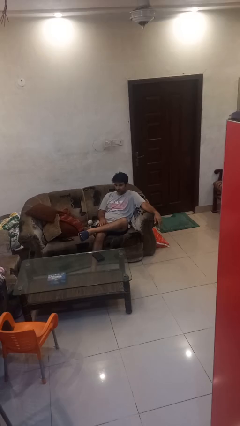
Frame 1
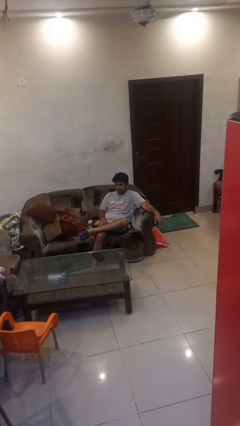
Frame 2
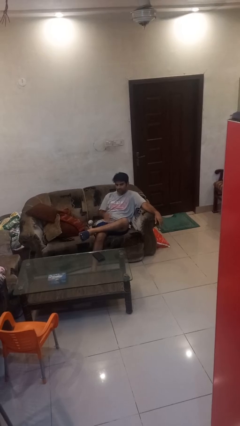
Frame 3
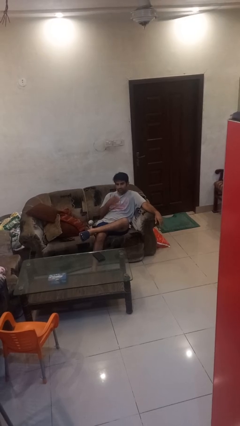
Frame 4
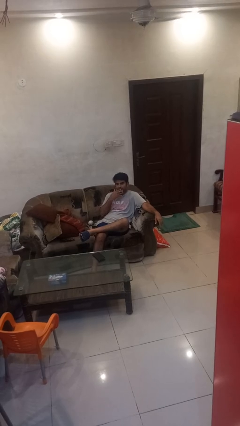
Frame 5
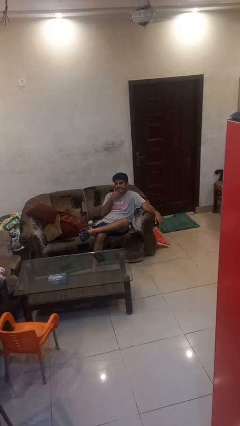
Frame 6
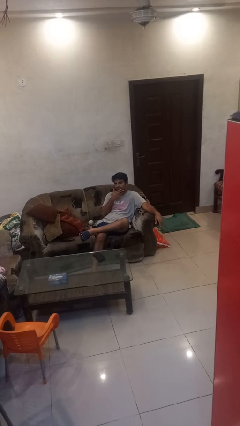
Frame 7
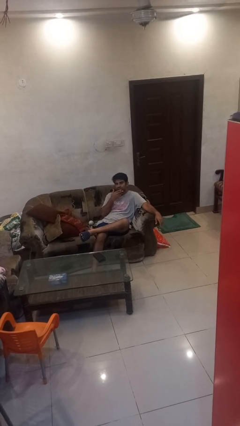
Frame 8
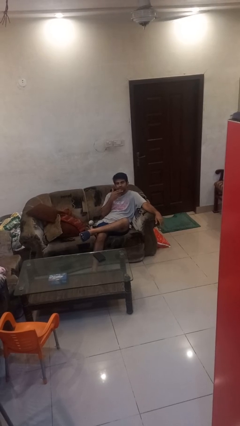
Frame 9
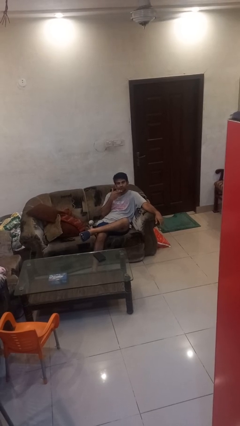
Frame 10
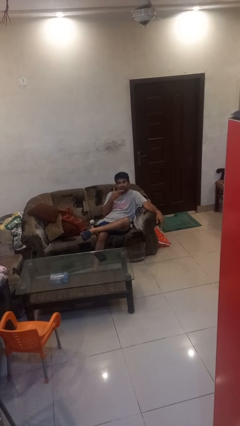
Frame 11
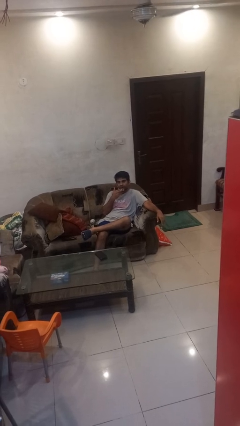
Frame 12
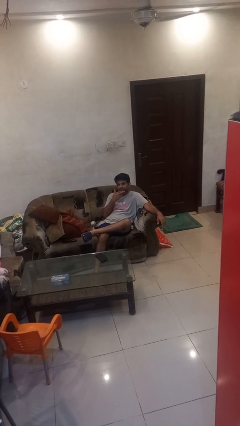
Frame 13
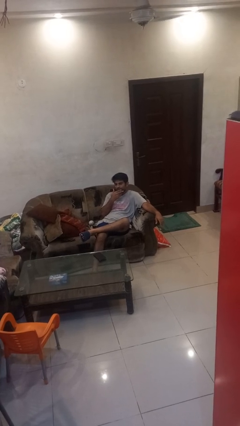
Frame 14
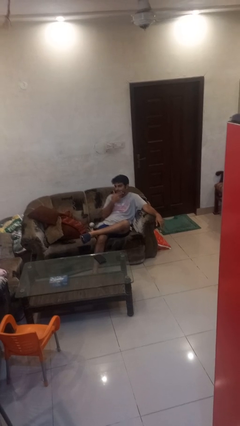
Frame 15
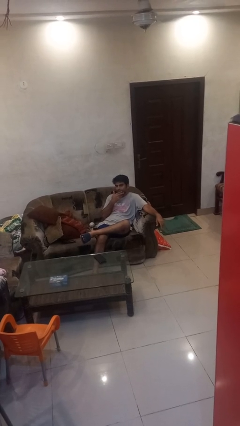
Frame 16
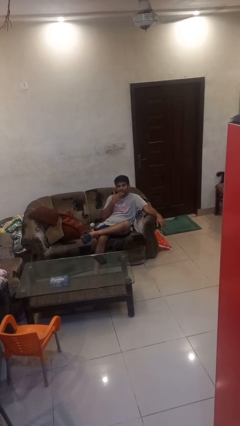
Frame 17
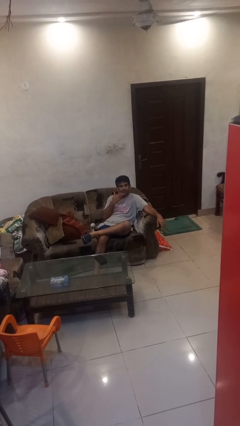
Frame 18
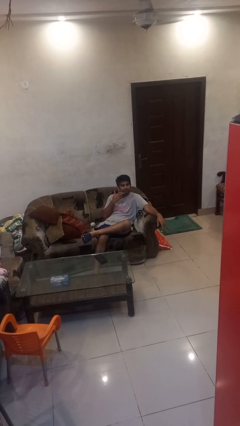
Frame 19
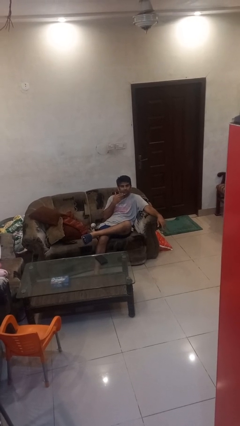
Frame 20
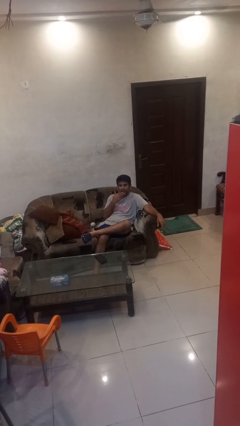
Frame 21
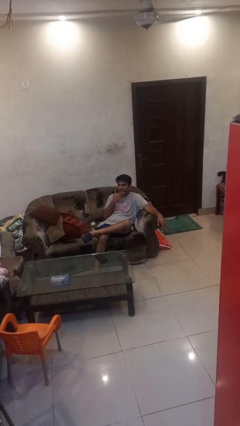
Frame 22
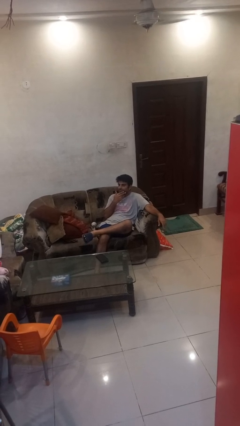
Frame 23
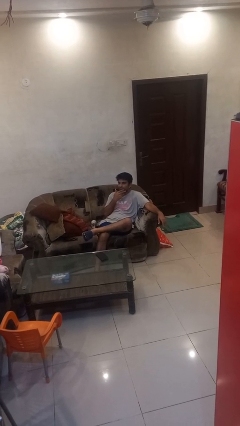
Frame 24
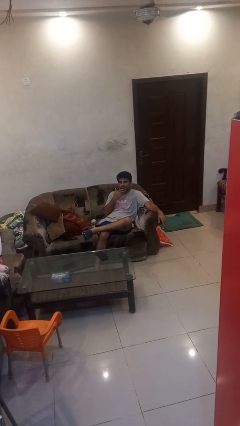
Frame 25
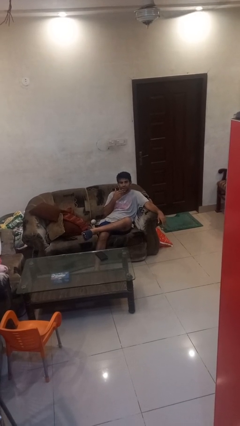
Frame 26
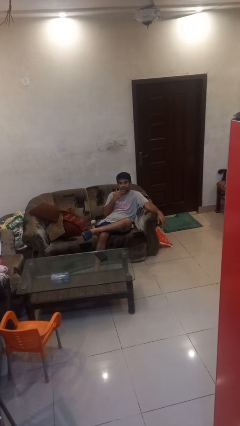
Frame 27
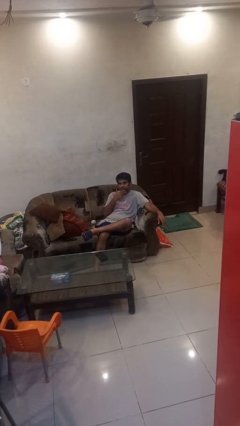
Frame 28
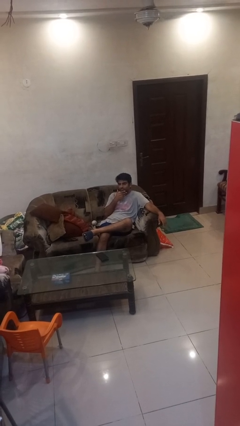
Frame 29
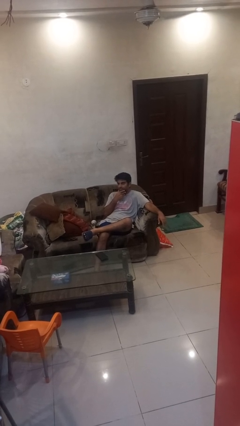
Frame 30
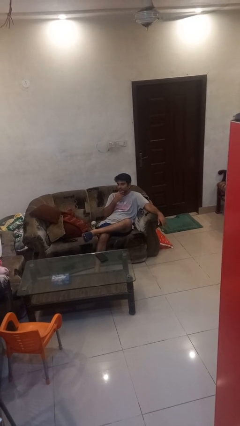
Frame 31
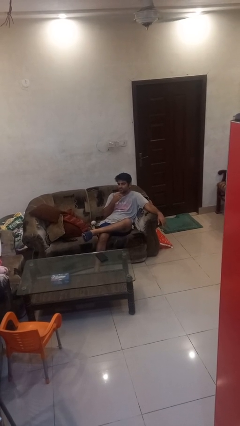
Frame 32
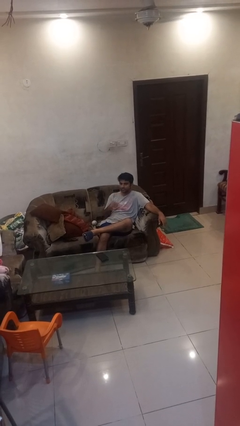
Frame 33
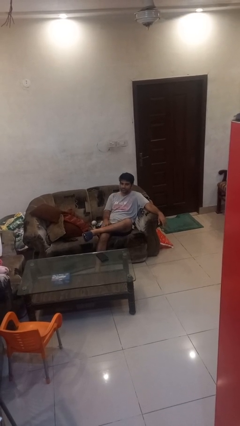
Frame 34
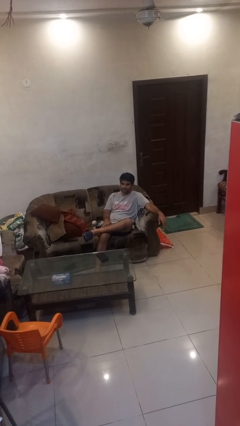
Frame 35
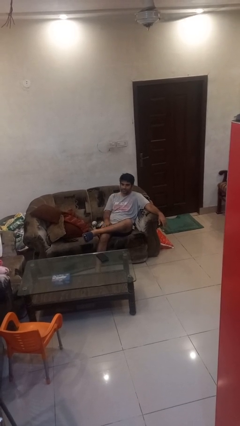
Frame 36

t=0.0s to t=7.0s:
person strokes chin

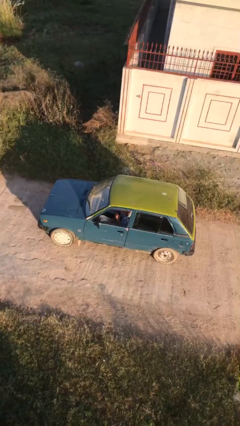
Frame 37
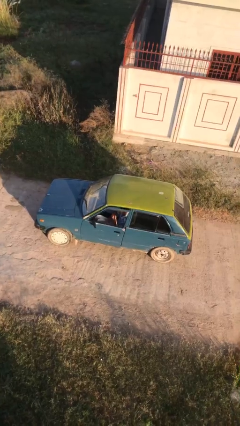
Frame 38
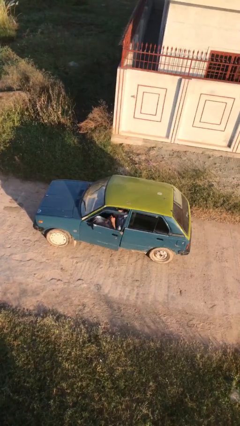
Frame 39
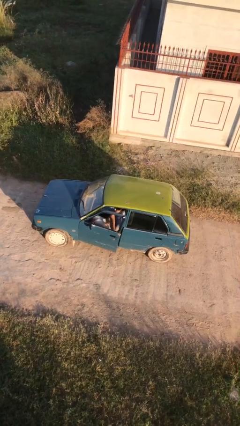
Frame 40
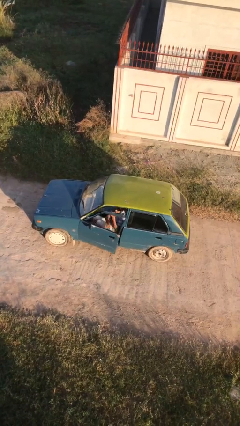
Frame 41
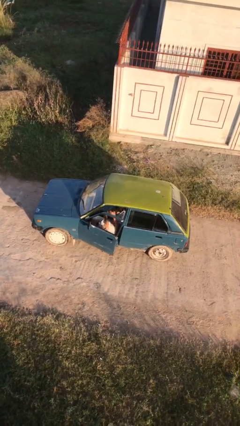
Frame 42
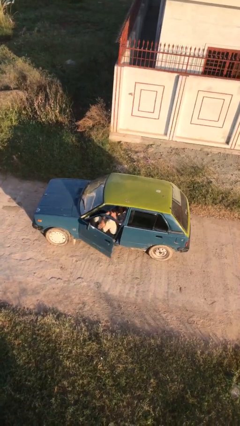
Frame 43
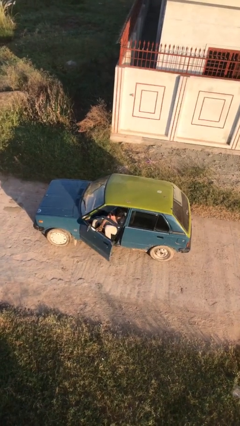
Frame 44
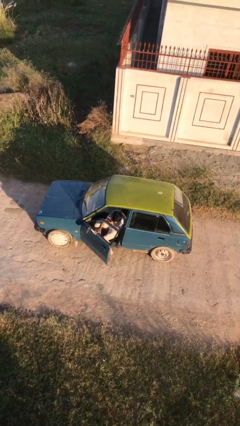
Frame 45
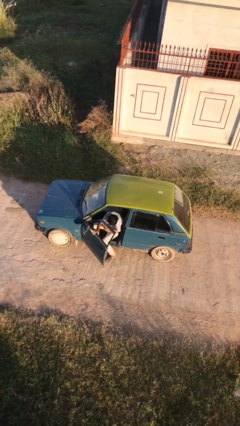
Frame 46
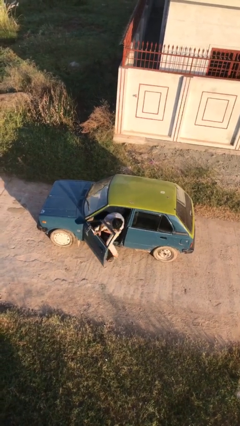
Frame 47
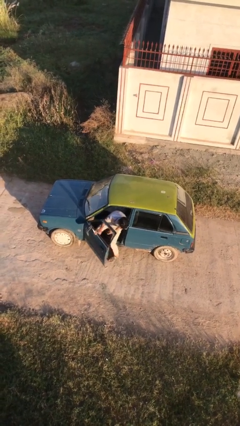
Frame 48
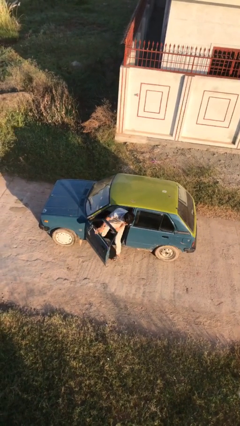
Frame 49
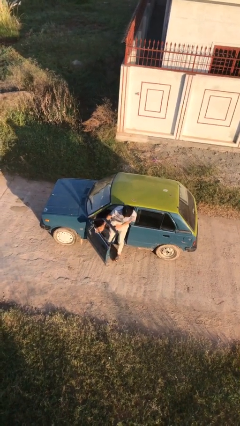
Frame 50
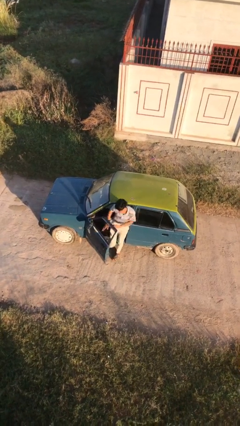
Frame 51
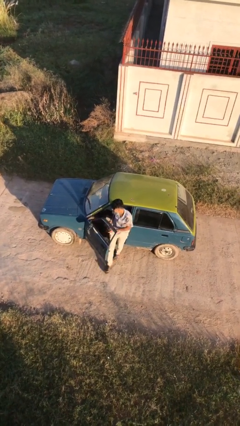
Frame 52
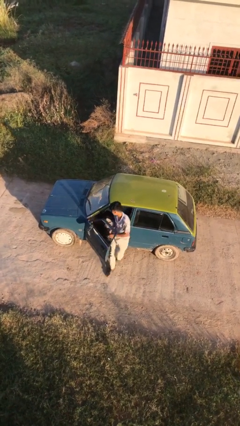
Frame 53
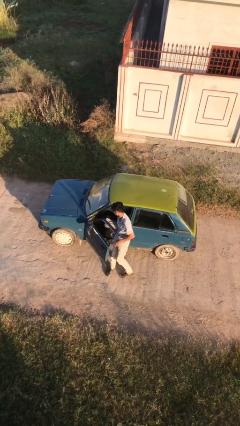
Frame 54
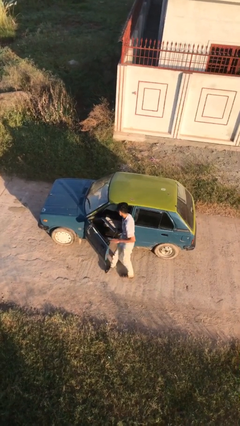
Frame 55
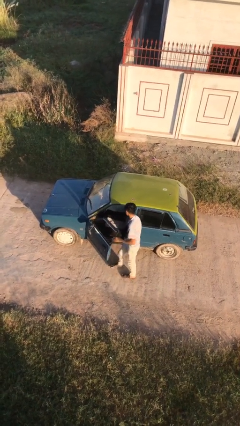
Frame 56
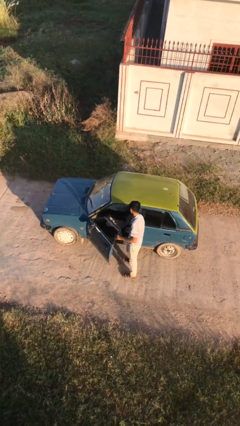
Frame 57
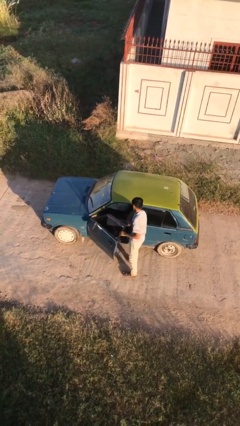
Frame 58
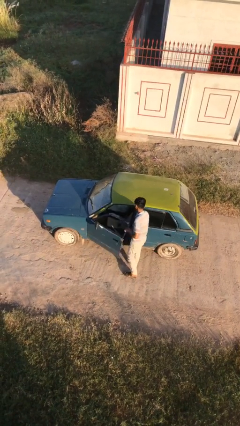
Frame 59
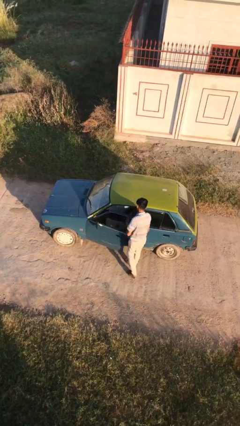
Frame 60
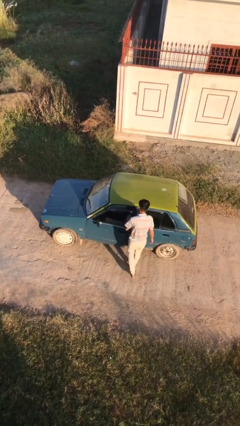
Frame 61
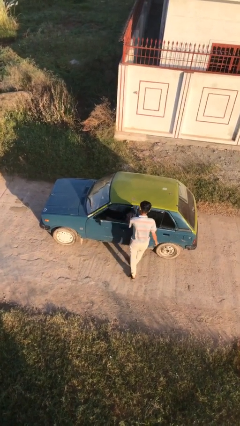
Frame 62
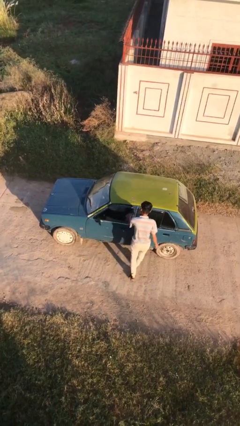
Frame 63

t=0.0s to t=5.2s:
car drops off person

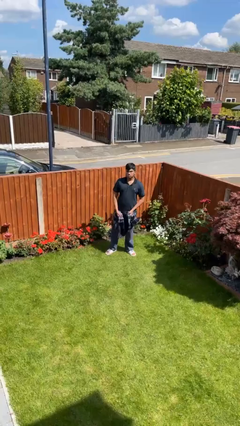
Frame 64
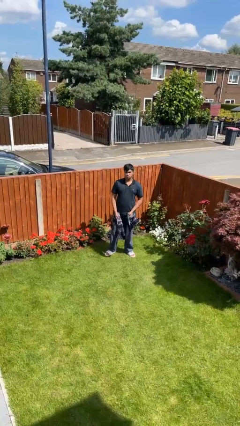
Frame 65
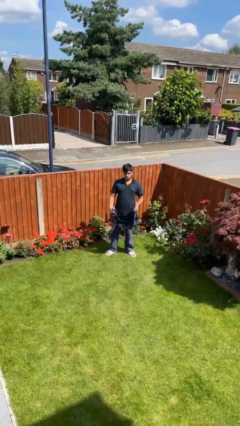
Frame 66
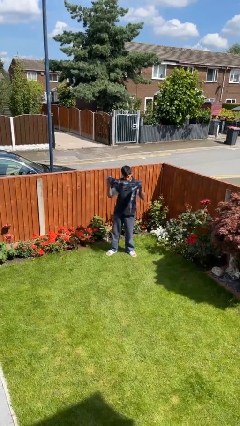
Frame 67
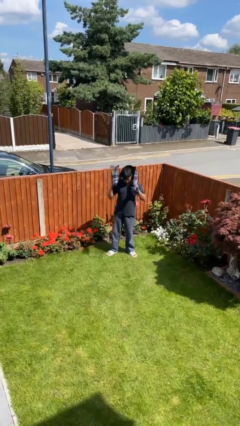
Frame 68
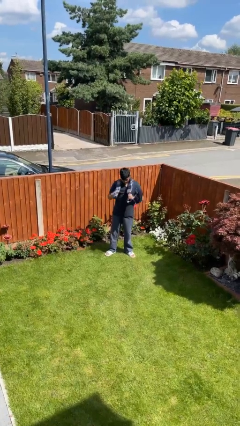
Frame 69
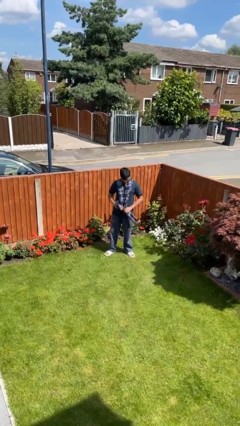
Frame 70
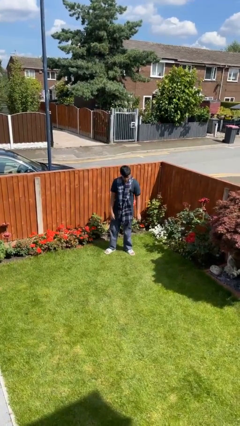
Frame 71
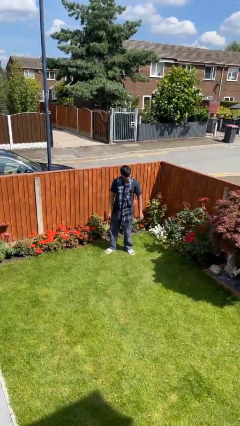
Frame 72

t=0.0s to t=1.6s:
person puts on scarf

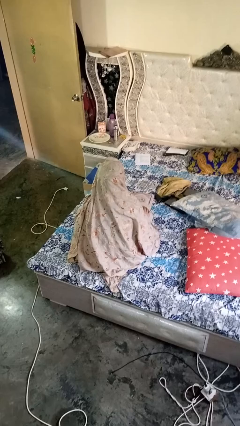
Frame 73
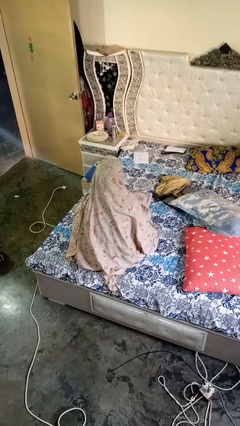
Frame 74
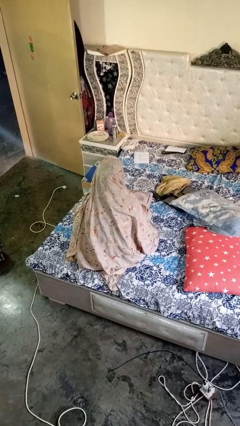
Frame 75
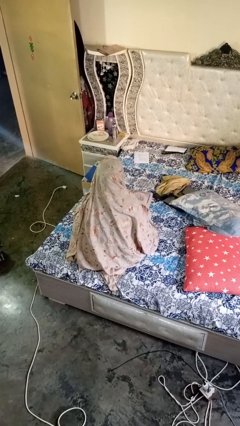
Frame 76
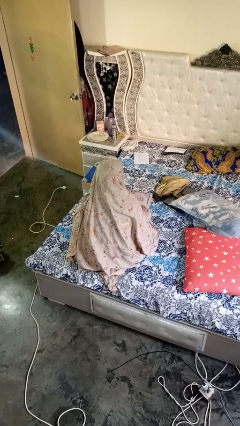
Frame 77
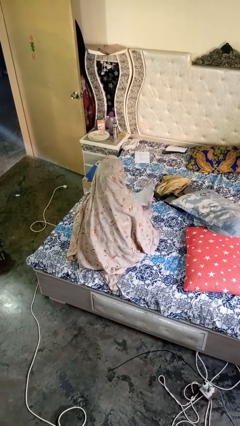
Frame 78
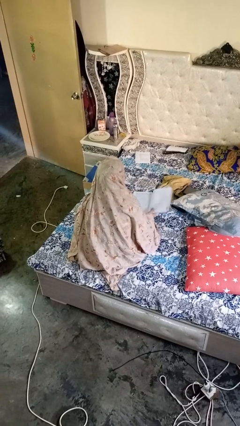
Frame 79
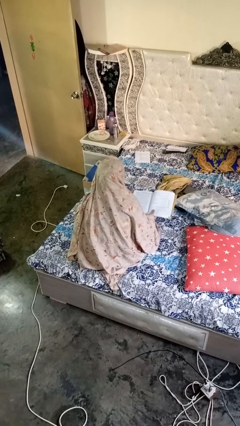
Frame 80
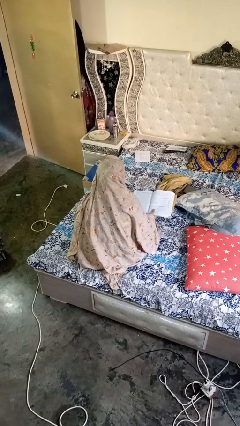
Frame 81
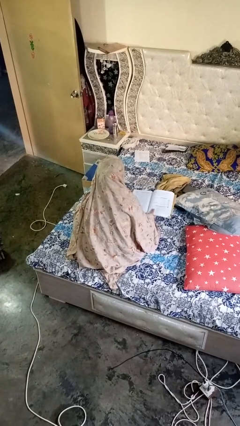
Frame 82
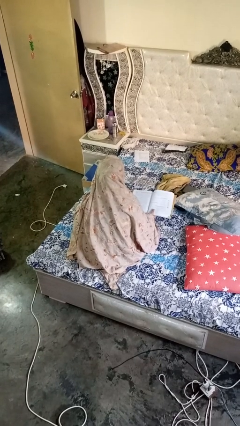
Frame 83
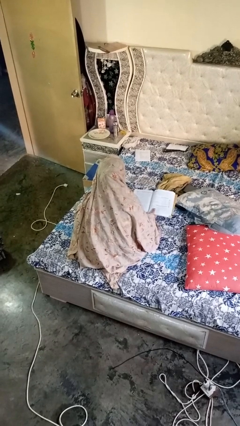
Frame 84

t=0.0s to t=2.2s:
person reads book

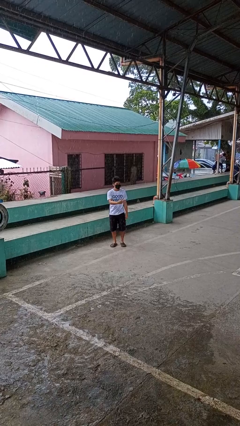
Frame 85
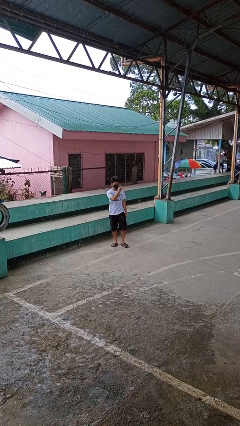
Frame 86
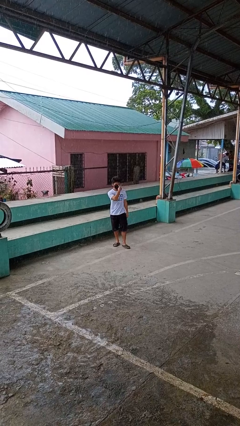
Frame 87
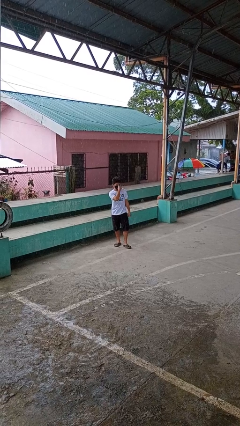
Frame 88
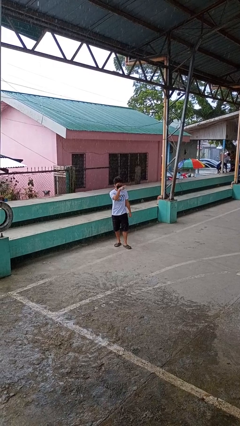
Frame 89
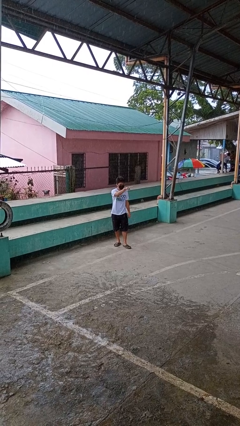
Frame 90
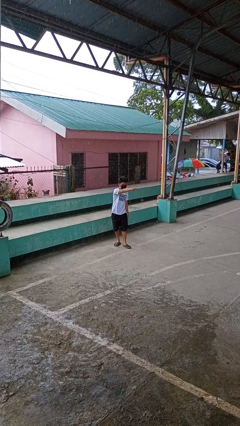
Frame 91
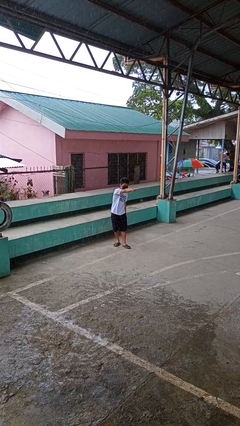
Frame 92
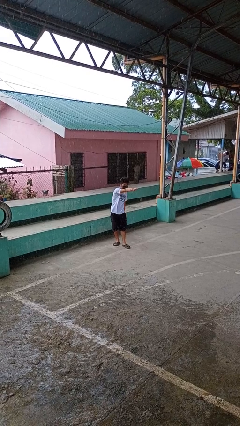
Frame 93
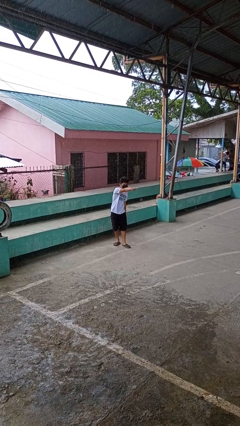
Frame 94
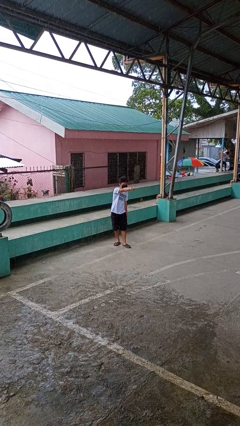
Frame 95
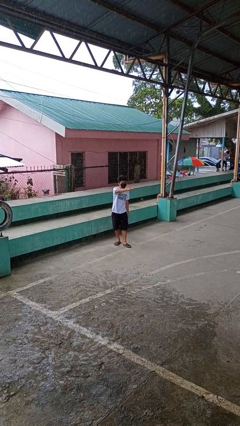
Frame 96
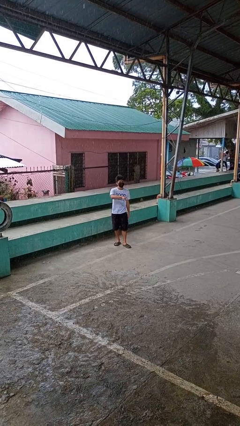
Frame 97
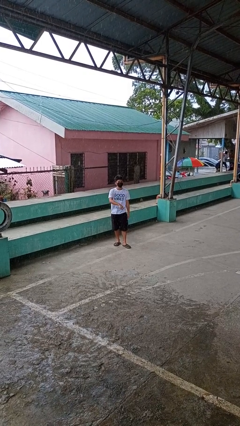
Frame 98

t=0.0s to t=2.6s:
person gestures watch closely
